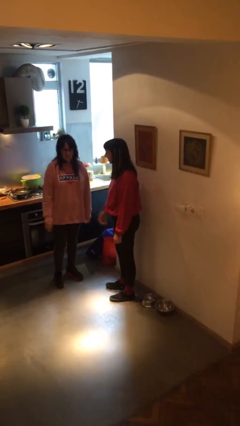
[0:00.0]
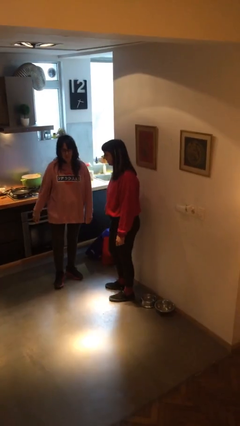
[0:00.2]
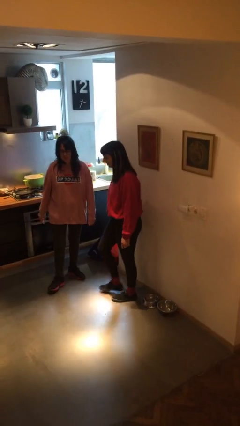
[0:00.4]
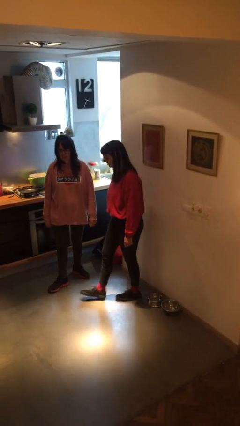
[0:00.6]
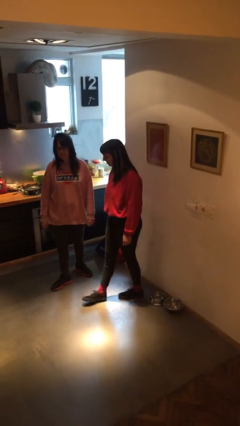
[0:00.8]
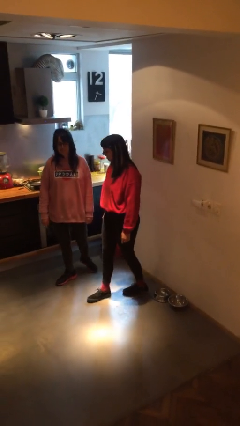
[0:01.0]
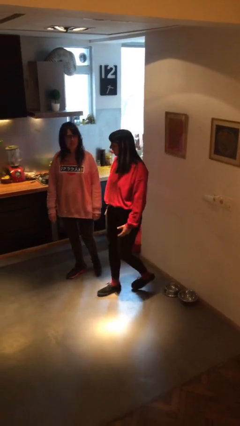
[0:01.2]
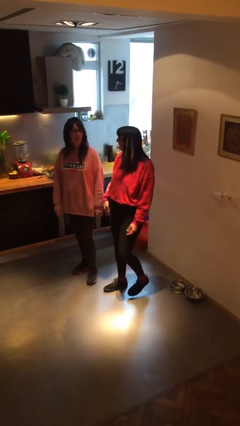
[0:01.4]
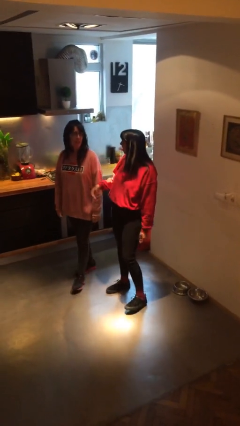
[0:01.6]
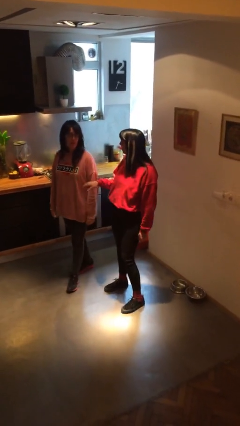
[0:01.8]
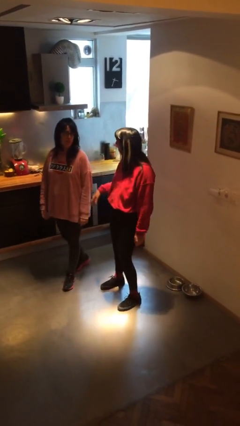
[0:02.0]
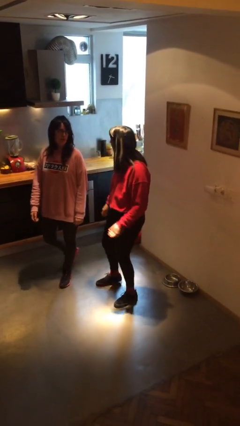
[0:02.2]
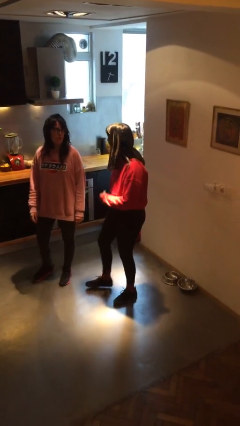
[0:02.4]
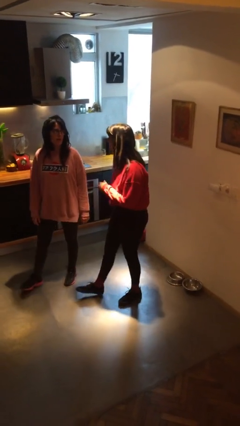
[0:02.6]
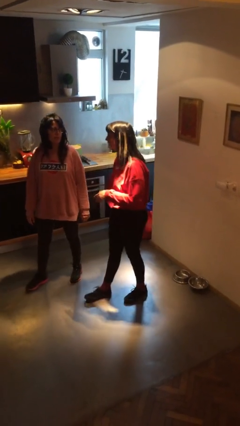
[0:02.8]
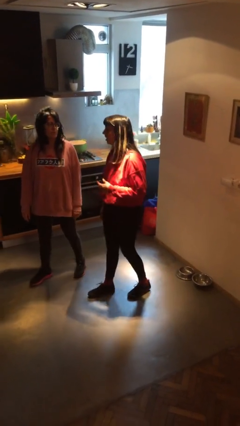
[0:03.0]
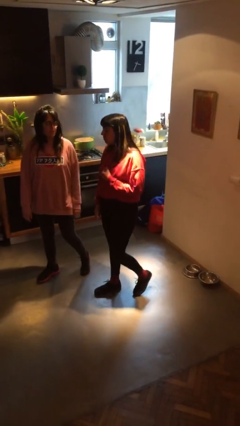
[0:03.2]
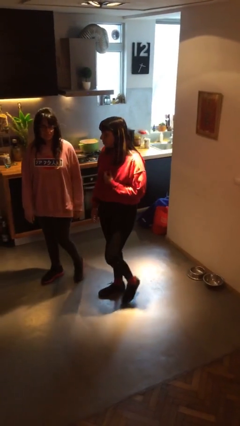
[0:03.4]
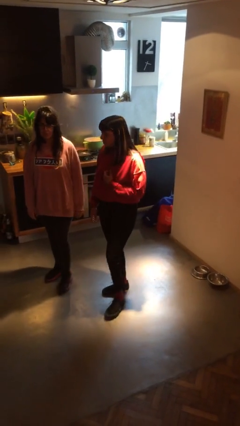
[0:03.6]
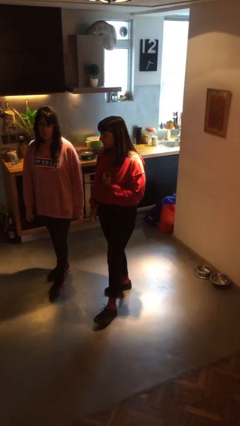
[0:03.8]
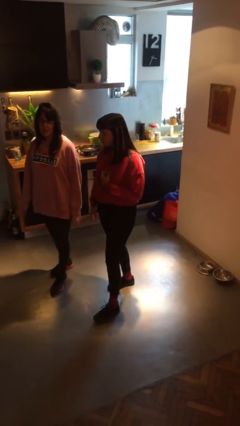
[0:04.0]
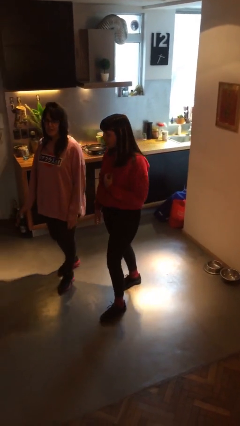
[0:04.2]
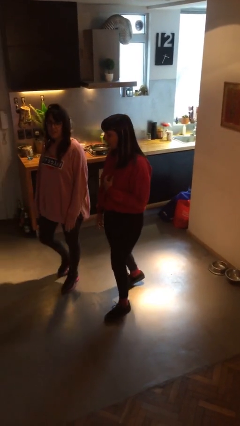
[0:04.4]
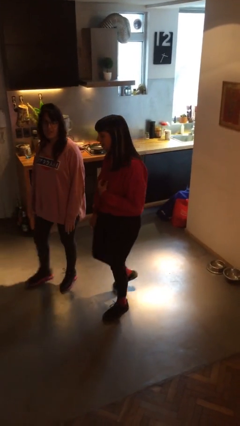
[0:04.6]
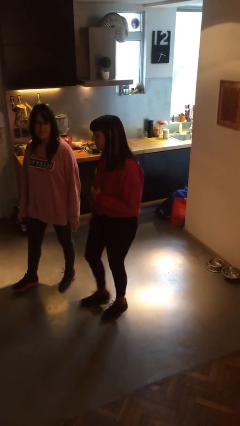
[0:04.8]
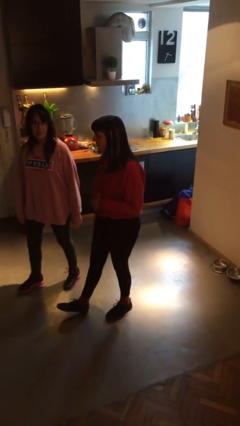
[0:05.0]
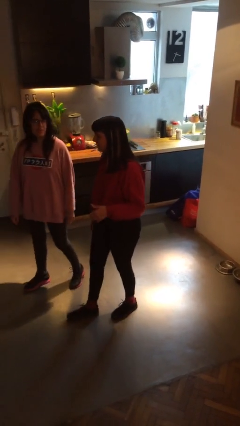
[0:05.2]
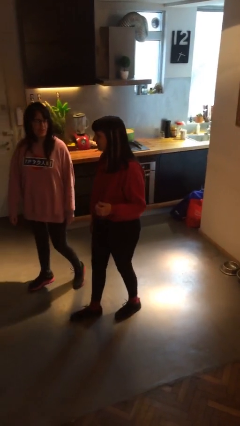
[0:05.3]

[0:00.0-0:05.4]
person talks to person

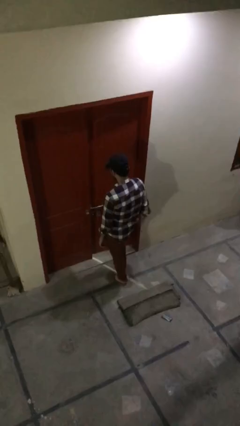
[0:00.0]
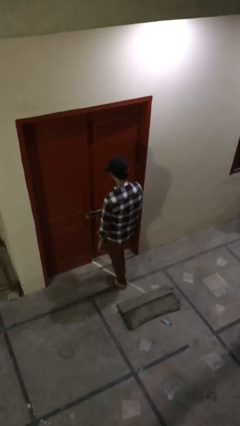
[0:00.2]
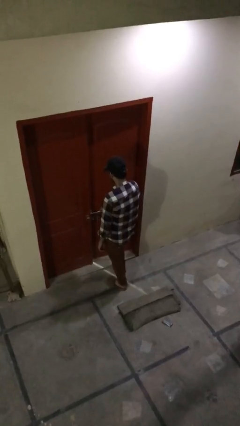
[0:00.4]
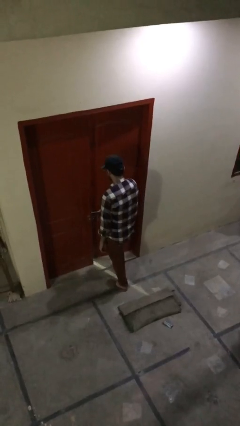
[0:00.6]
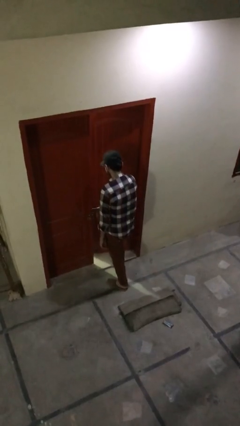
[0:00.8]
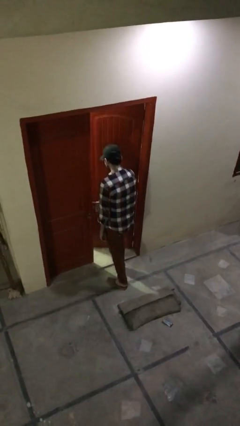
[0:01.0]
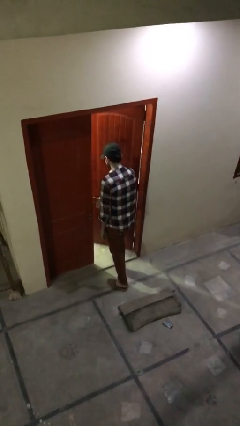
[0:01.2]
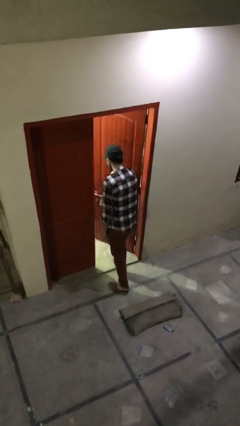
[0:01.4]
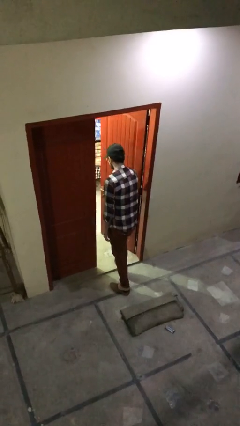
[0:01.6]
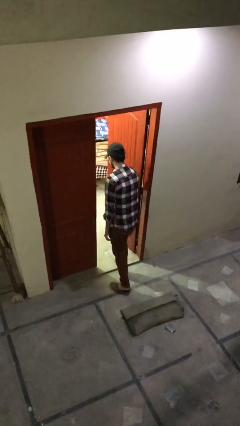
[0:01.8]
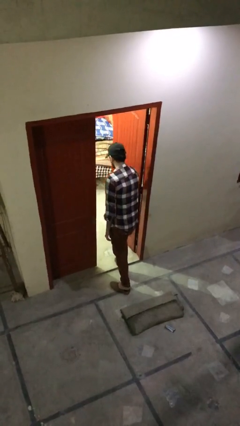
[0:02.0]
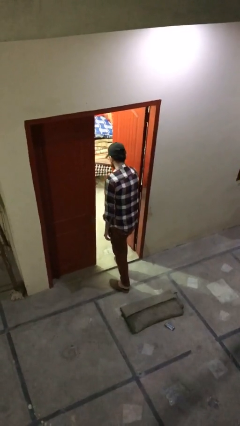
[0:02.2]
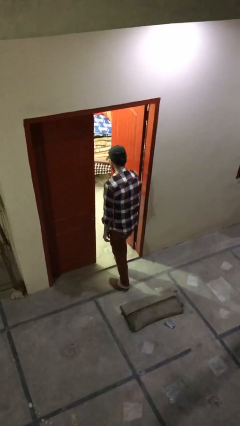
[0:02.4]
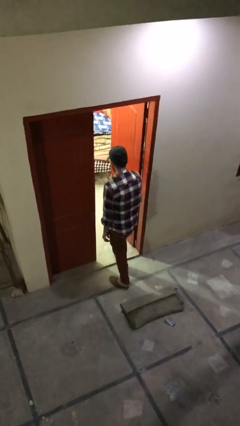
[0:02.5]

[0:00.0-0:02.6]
person opens facility door

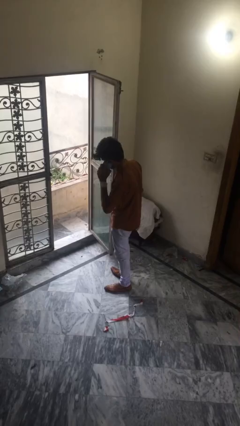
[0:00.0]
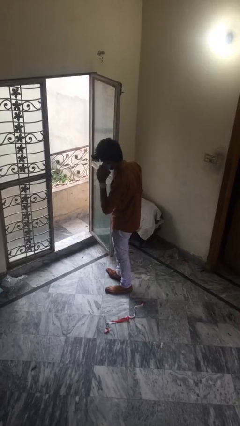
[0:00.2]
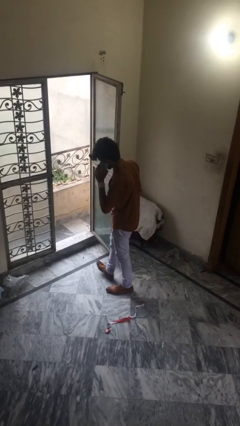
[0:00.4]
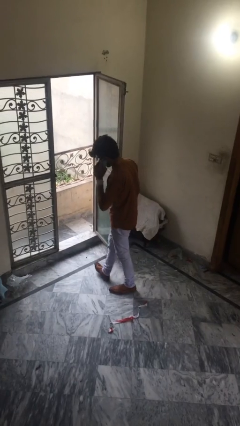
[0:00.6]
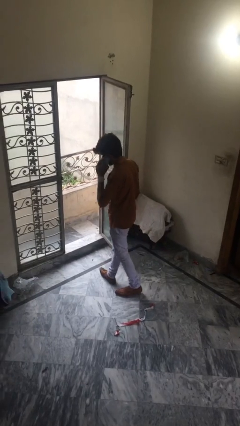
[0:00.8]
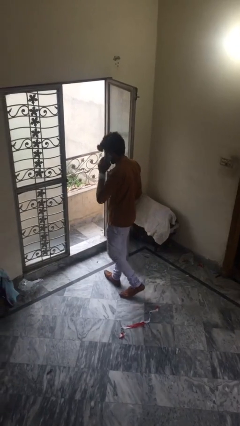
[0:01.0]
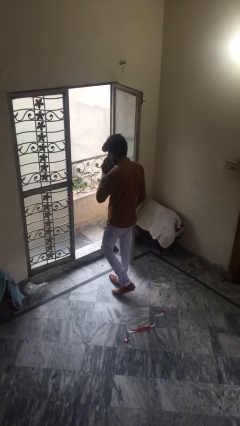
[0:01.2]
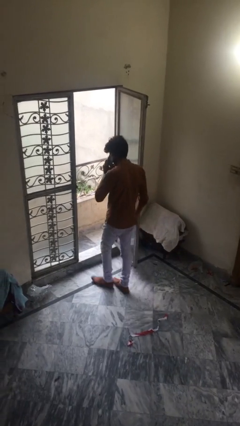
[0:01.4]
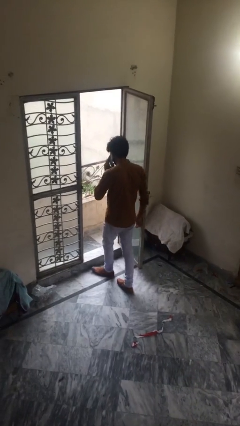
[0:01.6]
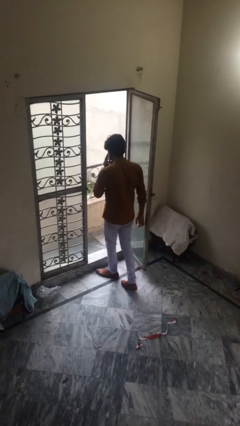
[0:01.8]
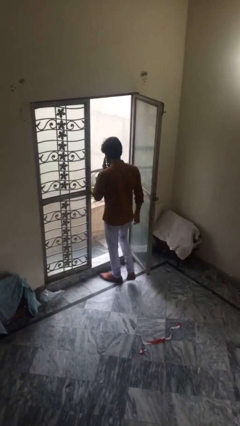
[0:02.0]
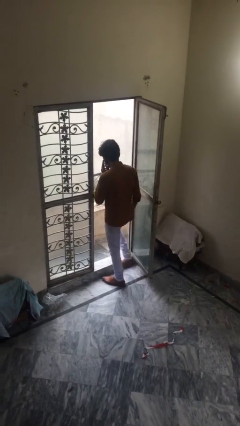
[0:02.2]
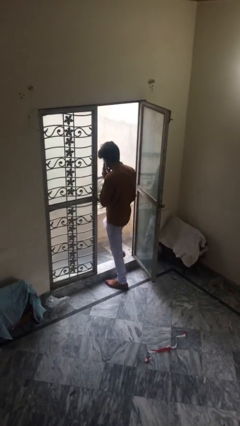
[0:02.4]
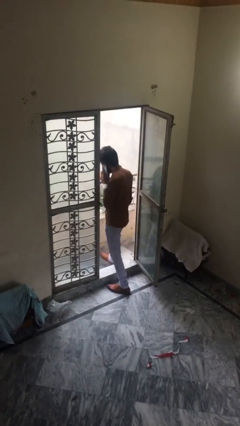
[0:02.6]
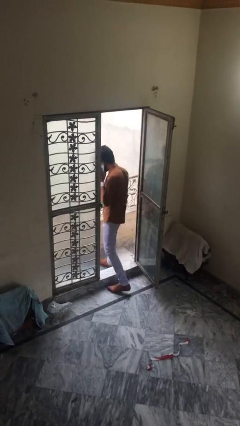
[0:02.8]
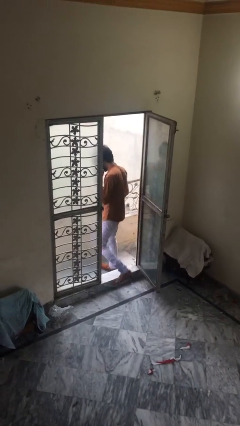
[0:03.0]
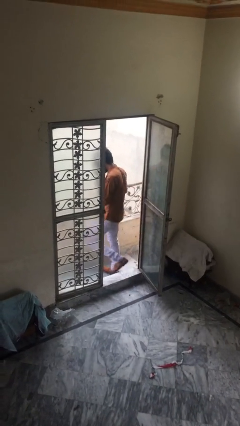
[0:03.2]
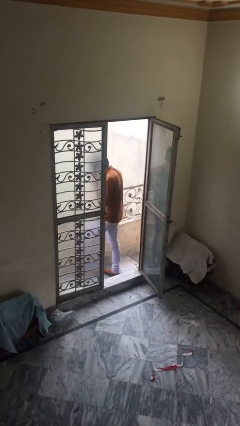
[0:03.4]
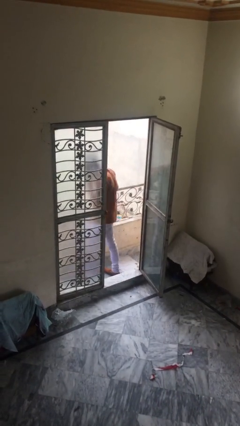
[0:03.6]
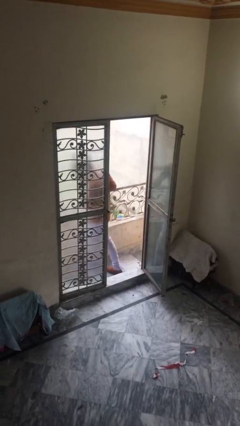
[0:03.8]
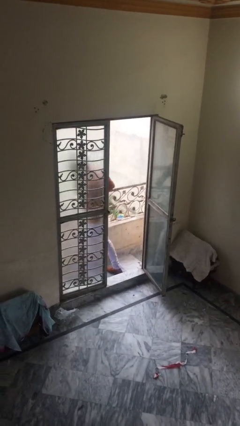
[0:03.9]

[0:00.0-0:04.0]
person exits scene through structure

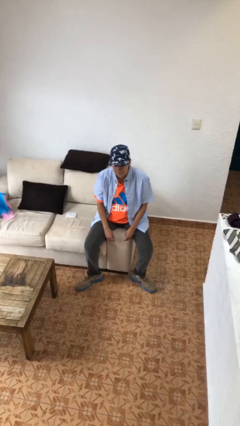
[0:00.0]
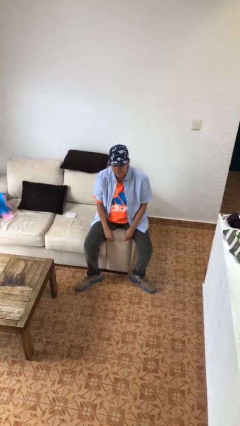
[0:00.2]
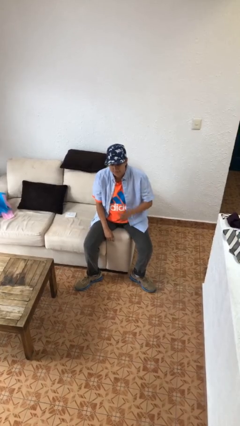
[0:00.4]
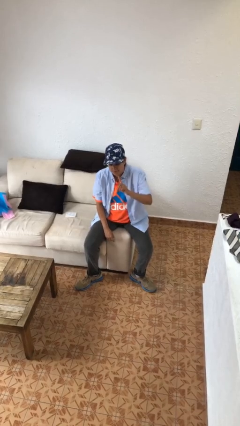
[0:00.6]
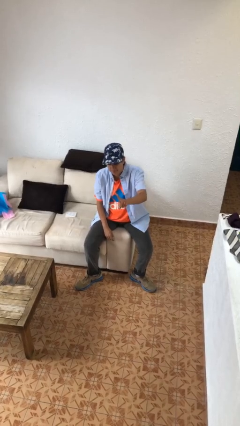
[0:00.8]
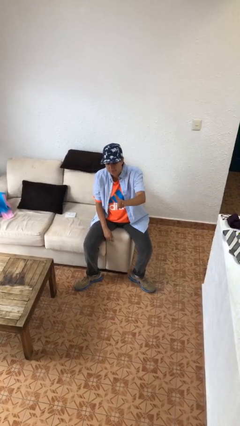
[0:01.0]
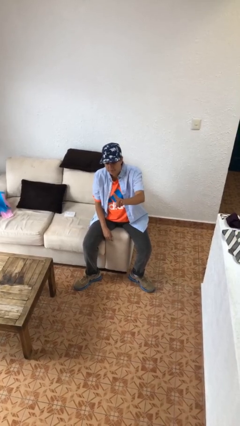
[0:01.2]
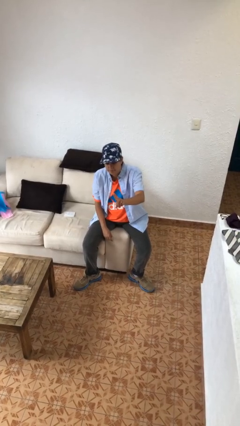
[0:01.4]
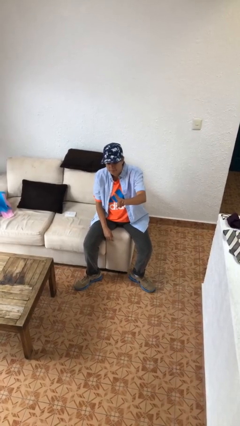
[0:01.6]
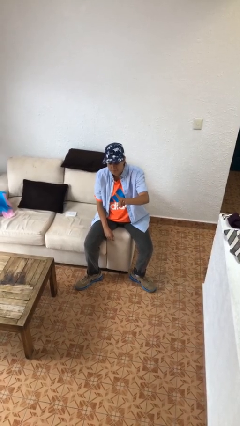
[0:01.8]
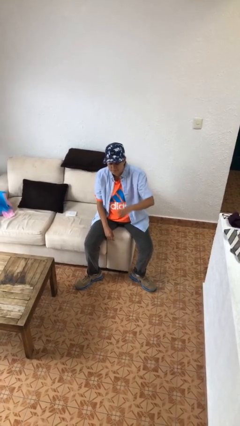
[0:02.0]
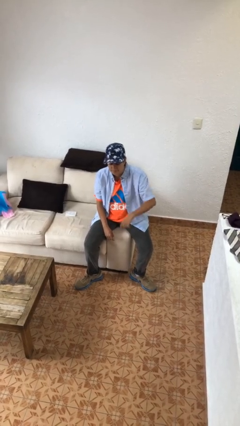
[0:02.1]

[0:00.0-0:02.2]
person gestures number one

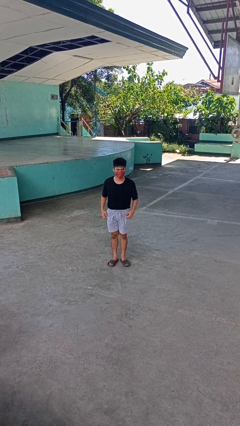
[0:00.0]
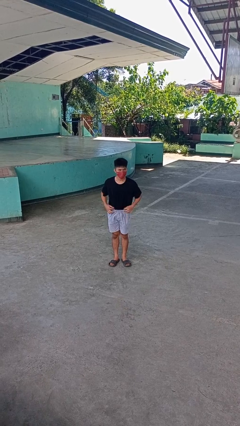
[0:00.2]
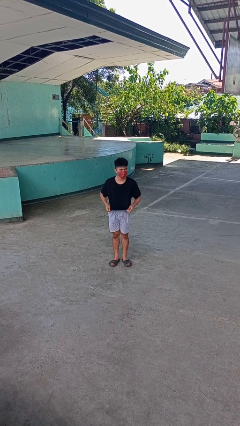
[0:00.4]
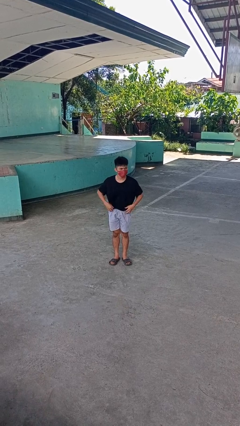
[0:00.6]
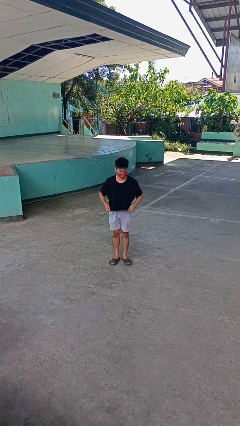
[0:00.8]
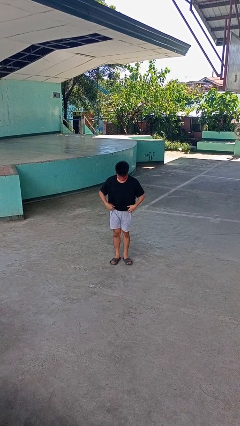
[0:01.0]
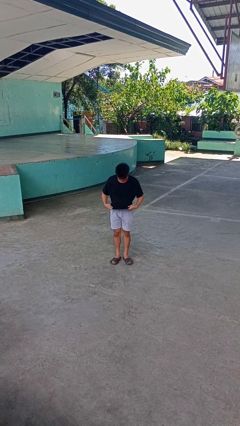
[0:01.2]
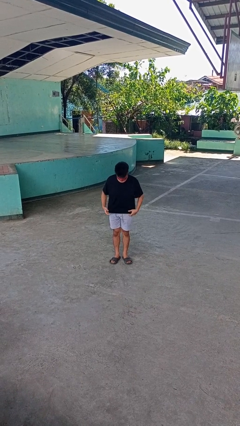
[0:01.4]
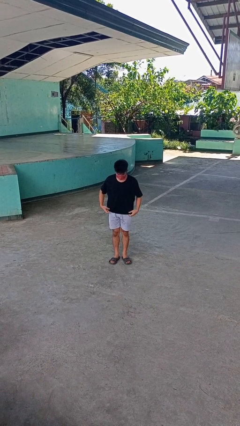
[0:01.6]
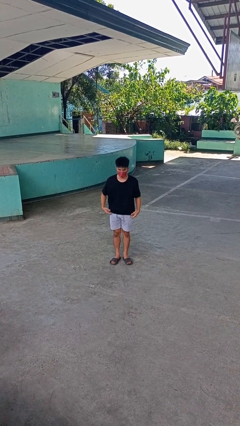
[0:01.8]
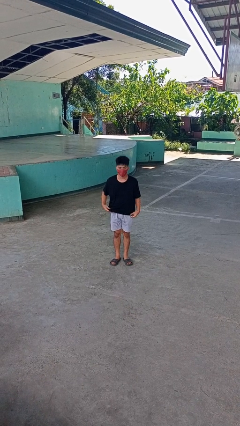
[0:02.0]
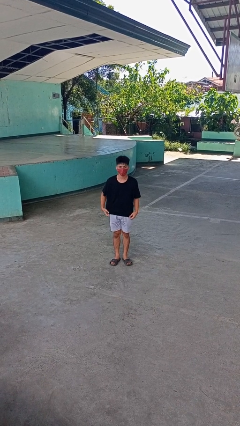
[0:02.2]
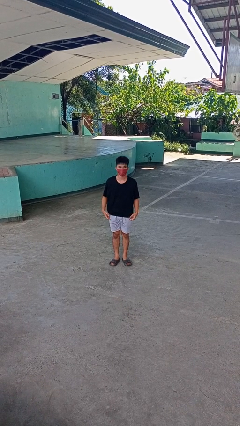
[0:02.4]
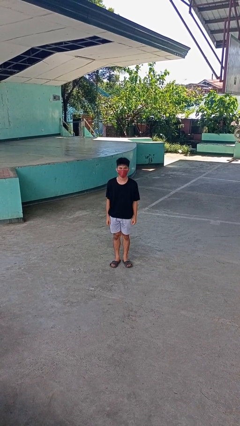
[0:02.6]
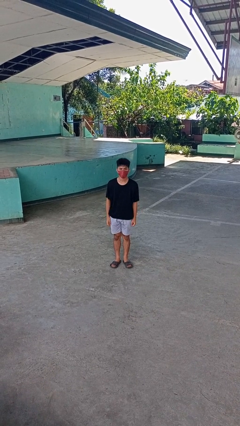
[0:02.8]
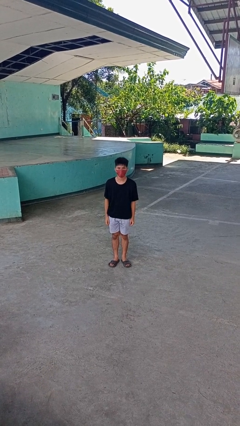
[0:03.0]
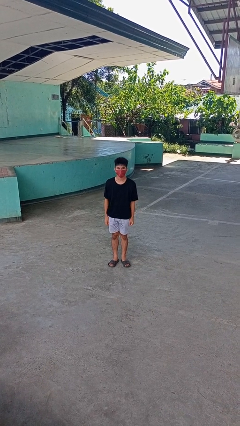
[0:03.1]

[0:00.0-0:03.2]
person untucks shirt
